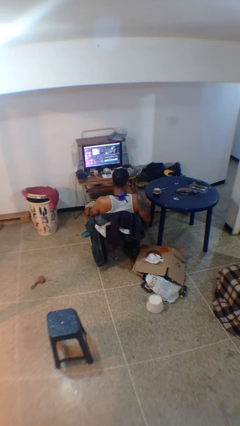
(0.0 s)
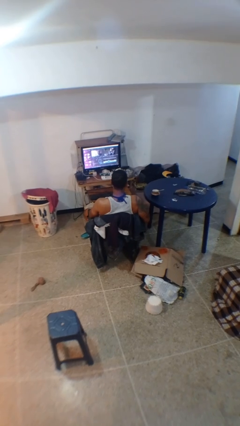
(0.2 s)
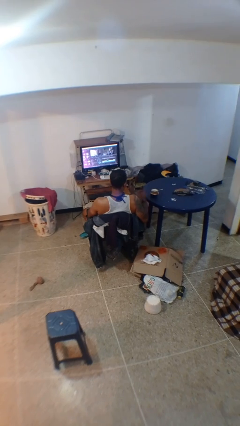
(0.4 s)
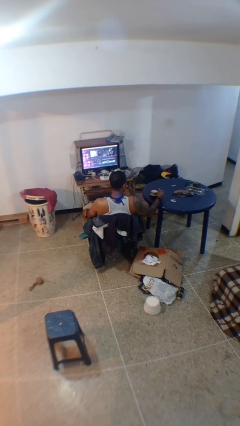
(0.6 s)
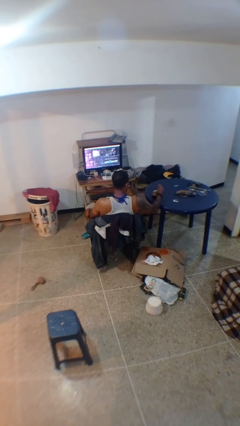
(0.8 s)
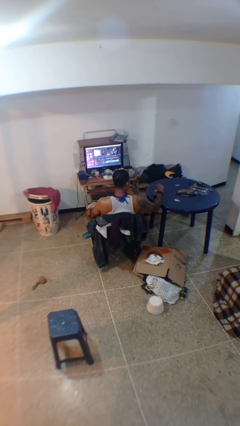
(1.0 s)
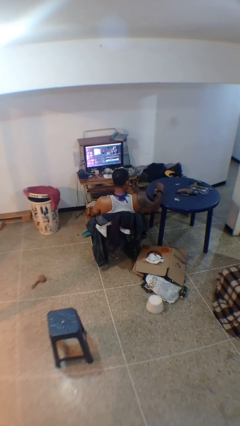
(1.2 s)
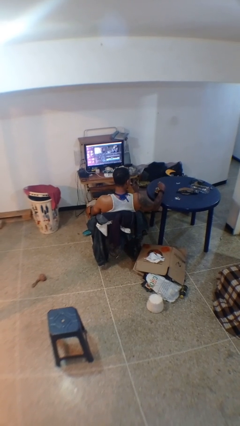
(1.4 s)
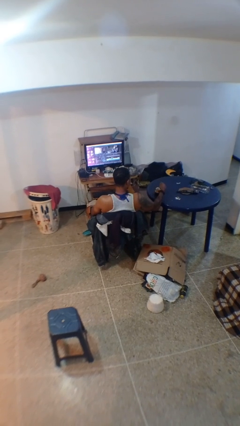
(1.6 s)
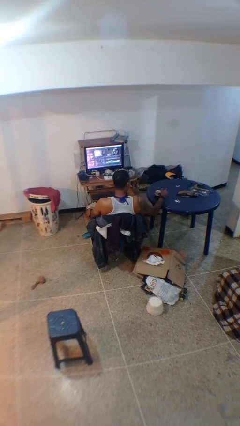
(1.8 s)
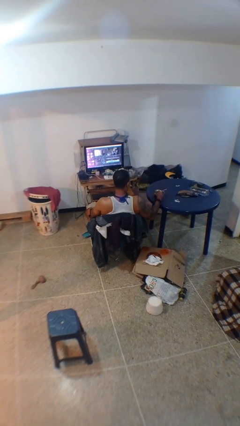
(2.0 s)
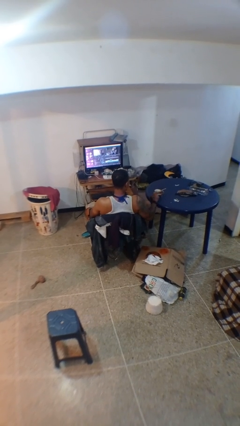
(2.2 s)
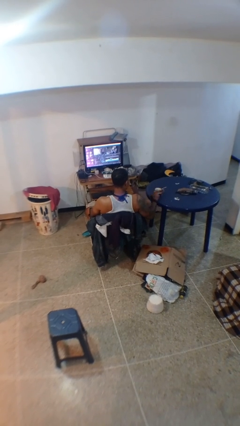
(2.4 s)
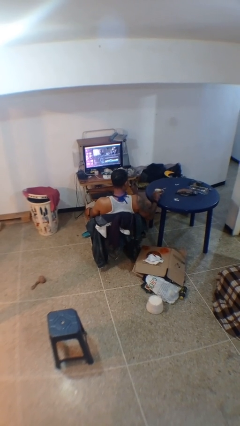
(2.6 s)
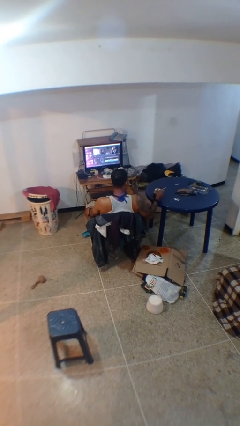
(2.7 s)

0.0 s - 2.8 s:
person stirs mug

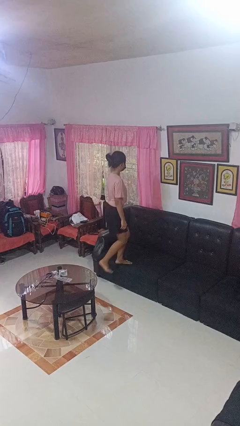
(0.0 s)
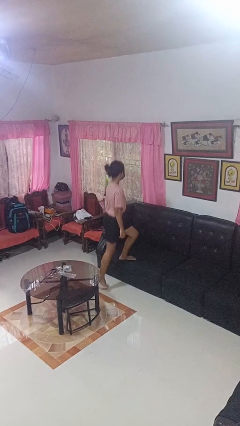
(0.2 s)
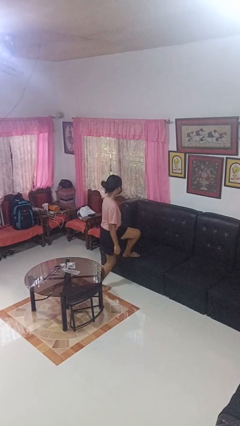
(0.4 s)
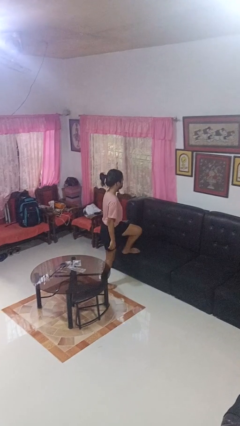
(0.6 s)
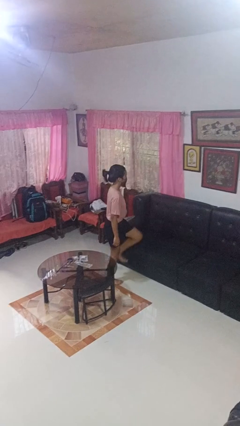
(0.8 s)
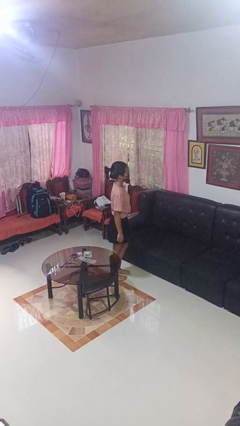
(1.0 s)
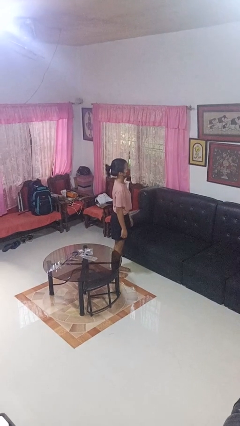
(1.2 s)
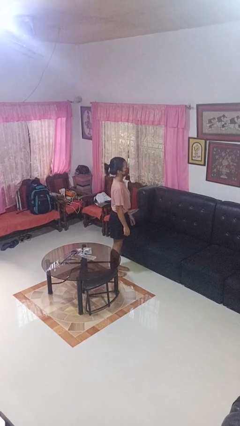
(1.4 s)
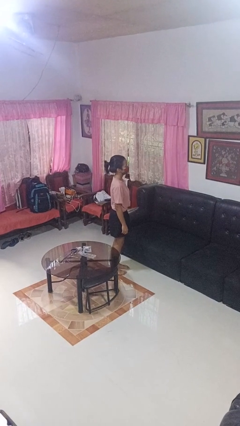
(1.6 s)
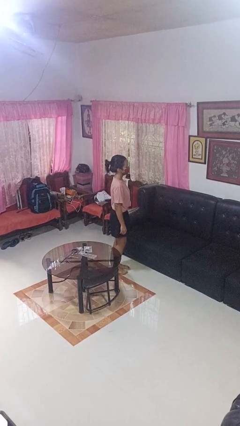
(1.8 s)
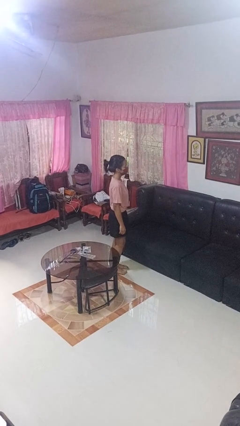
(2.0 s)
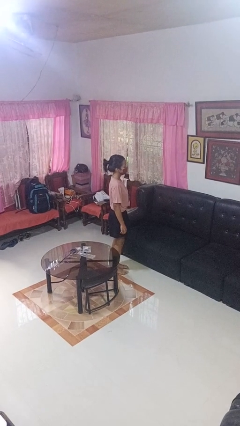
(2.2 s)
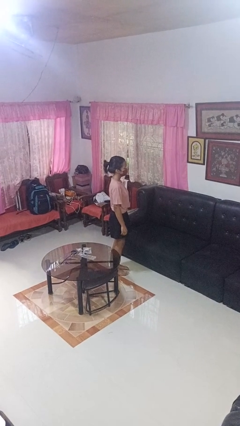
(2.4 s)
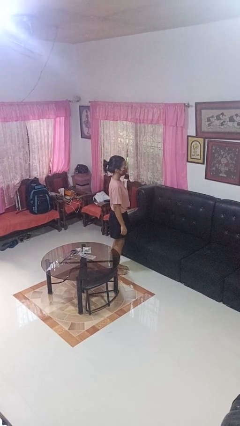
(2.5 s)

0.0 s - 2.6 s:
person climbs off couch

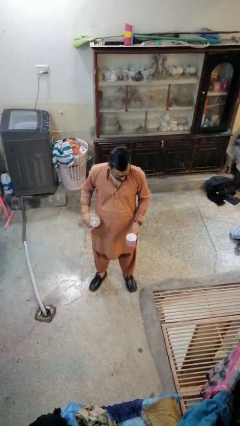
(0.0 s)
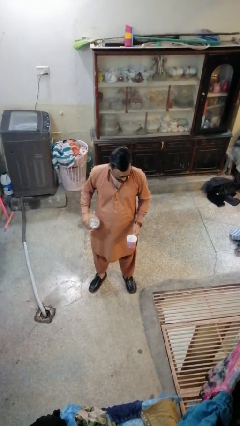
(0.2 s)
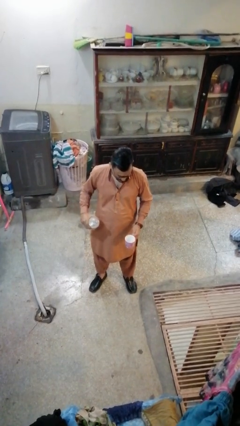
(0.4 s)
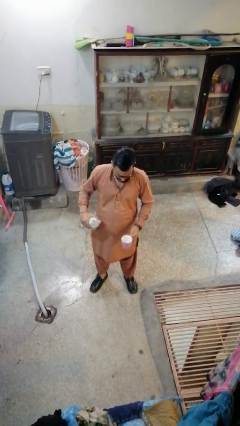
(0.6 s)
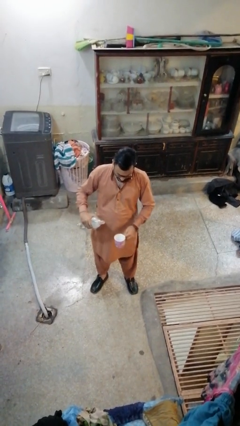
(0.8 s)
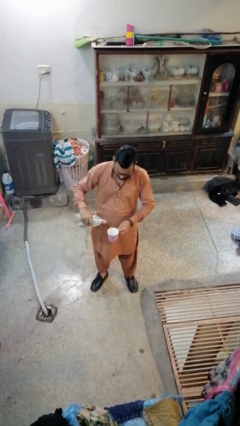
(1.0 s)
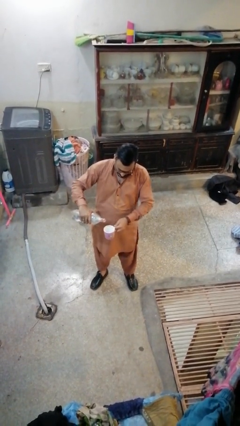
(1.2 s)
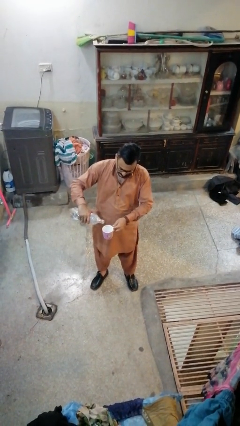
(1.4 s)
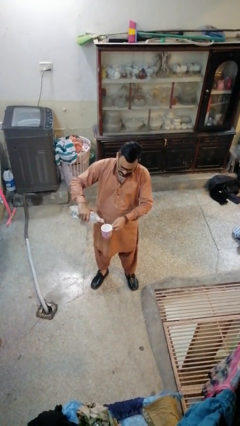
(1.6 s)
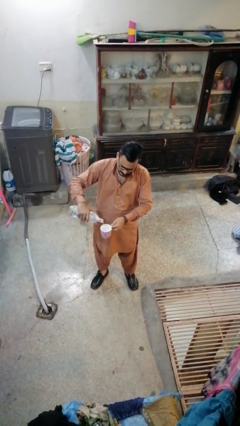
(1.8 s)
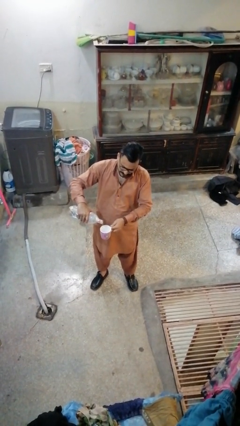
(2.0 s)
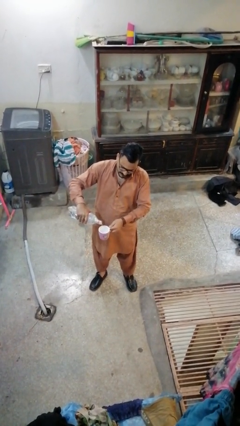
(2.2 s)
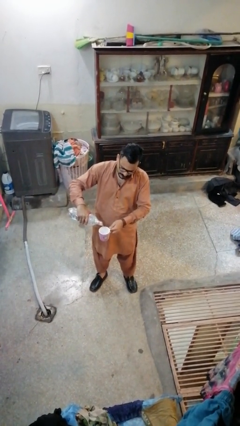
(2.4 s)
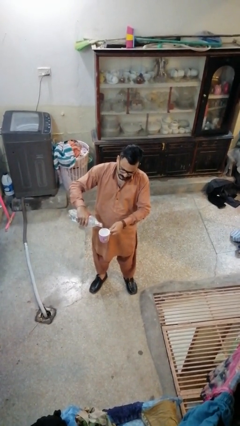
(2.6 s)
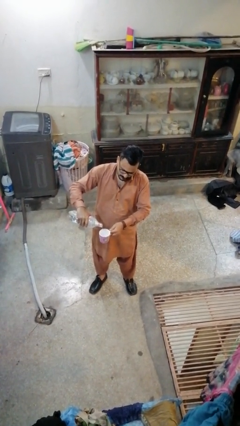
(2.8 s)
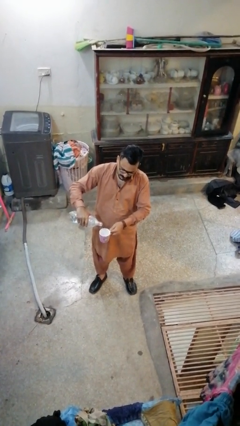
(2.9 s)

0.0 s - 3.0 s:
person pours liquid into cup

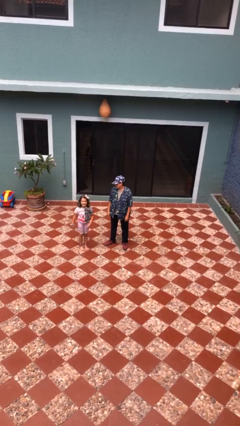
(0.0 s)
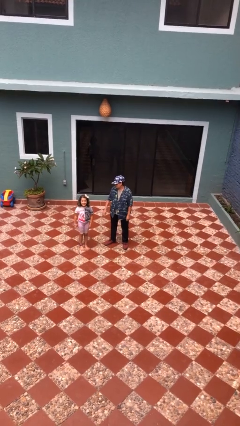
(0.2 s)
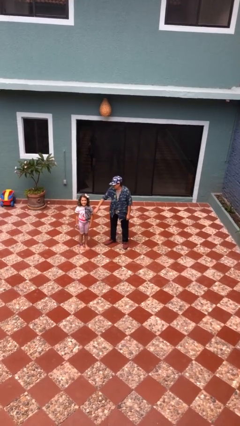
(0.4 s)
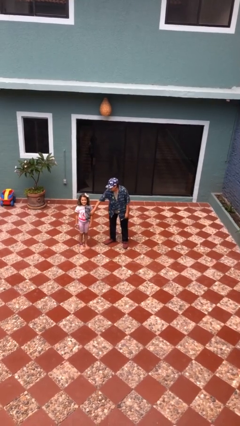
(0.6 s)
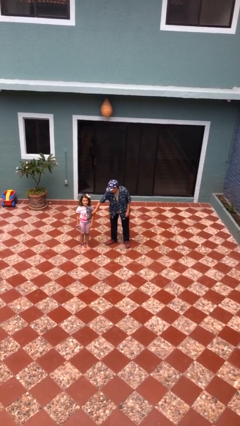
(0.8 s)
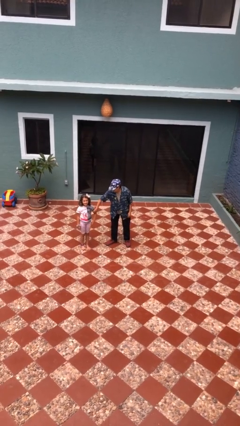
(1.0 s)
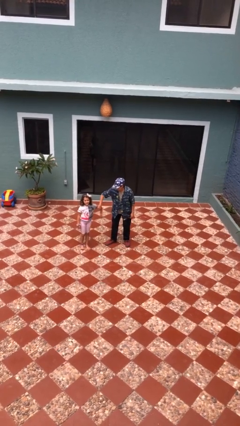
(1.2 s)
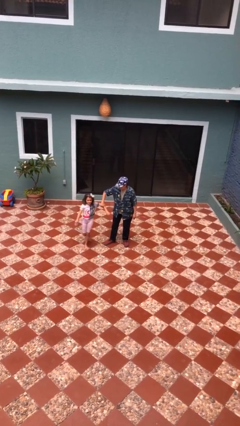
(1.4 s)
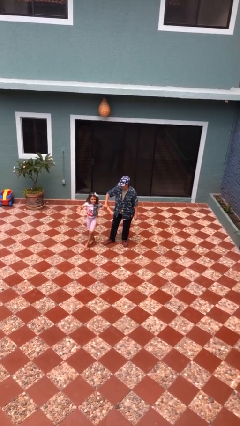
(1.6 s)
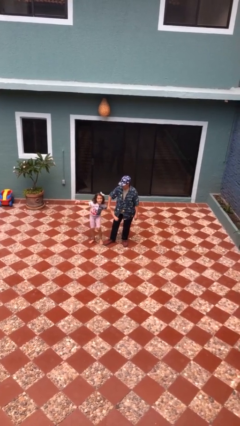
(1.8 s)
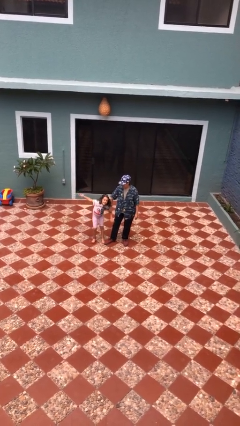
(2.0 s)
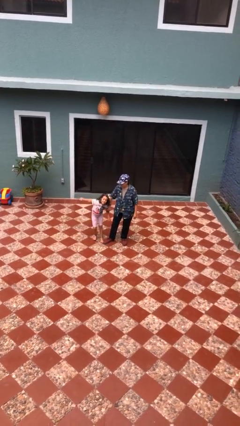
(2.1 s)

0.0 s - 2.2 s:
person grabs person by bicep

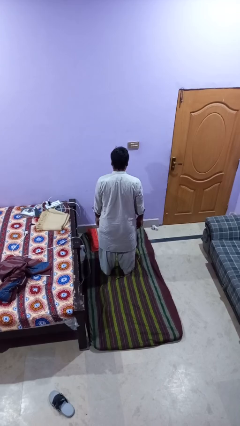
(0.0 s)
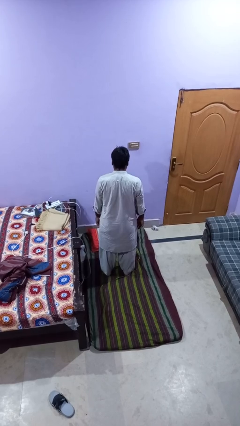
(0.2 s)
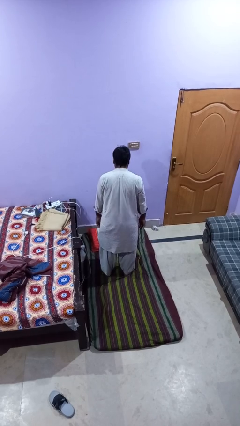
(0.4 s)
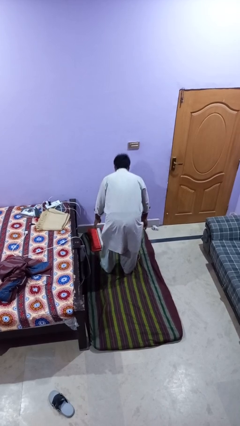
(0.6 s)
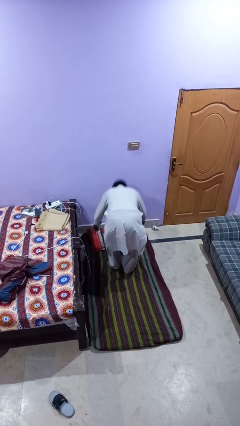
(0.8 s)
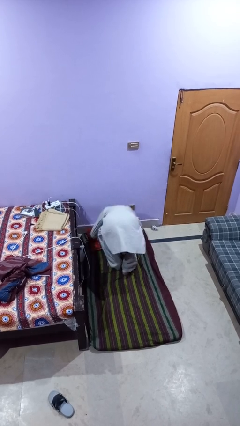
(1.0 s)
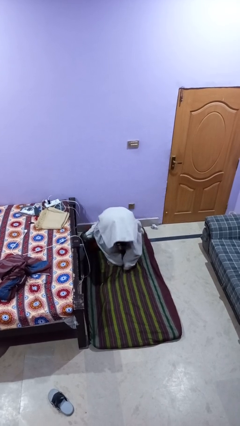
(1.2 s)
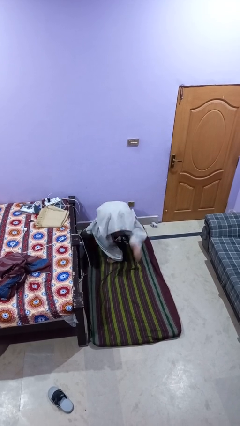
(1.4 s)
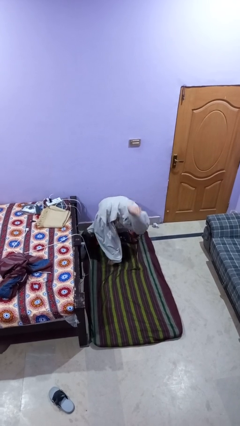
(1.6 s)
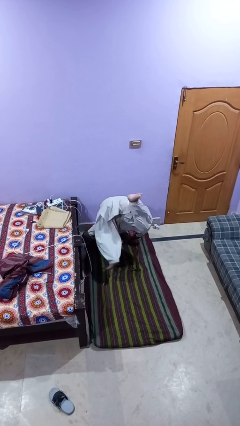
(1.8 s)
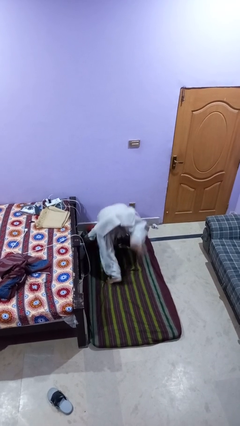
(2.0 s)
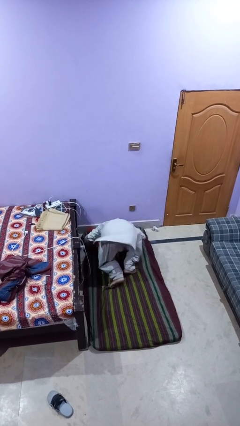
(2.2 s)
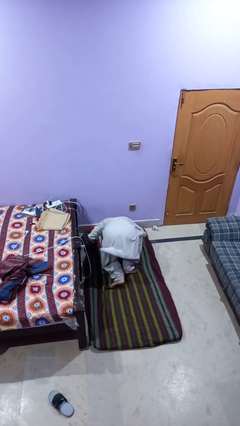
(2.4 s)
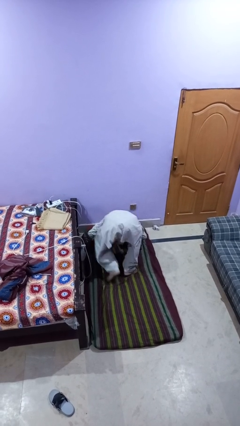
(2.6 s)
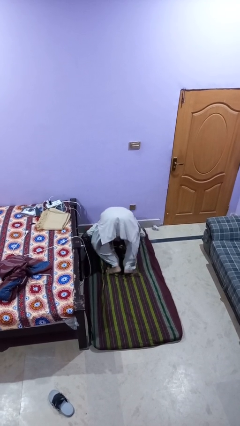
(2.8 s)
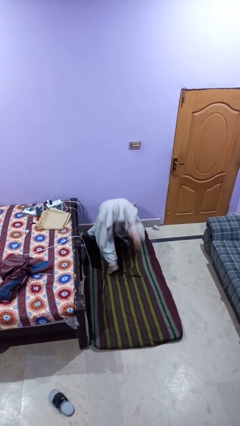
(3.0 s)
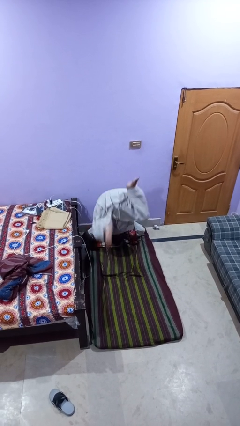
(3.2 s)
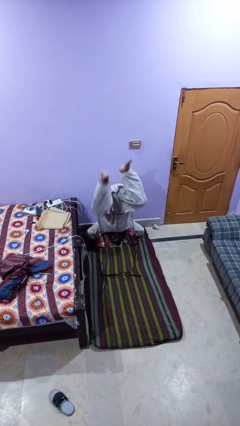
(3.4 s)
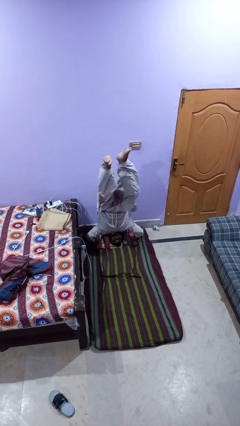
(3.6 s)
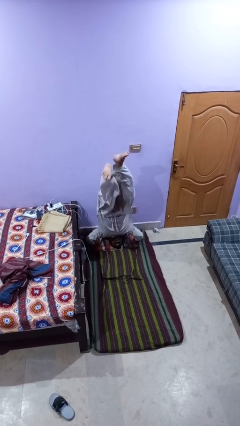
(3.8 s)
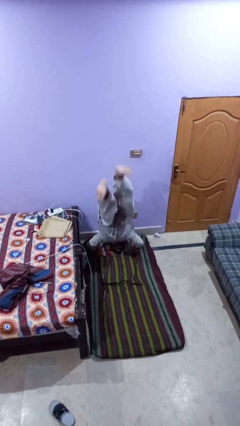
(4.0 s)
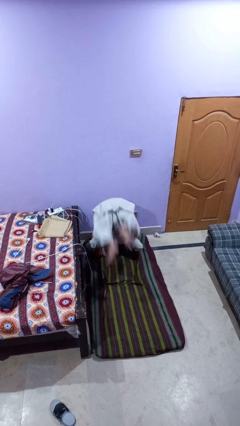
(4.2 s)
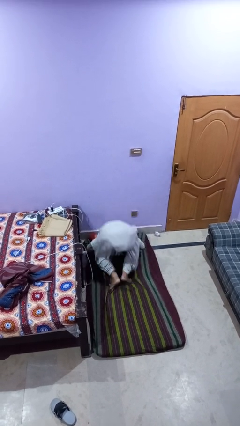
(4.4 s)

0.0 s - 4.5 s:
person handstand

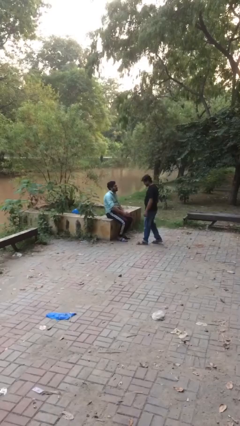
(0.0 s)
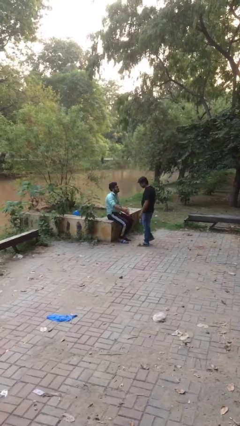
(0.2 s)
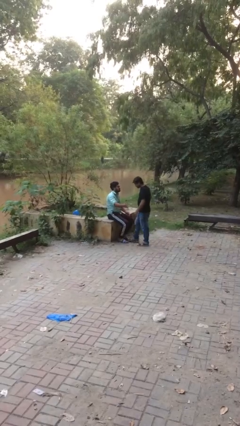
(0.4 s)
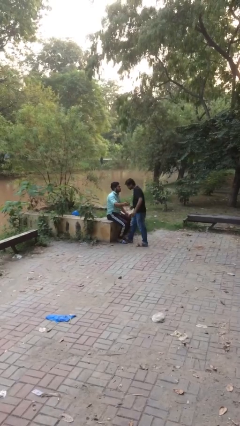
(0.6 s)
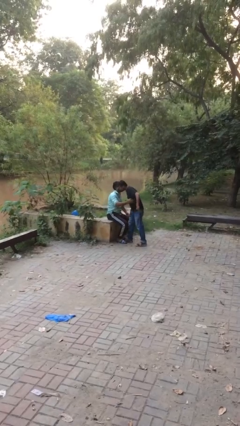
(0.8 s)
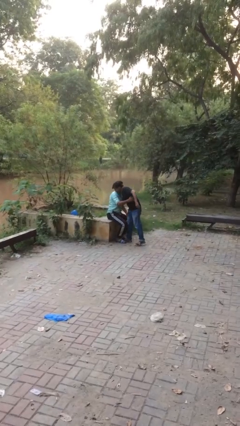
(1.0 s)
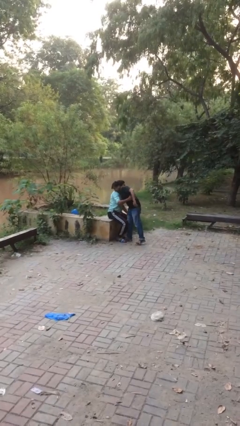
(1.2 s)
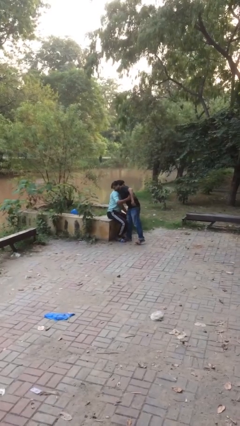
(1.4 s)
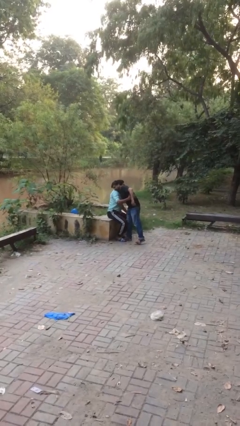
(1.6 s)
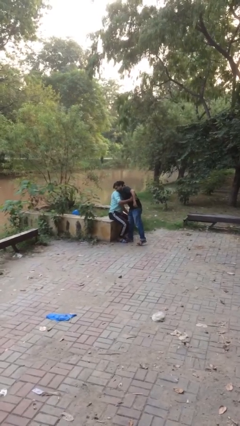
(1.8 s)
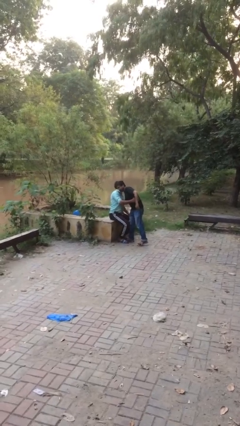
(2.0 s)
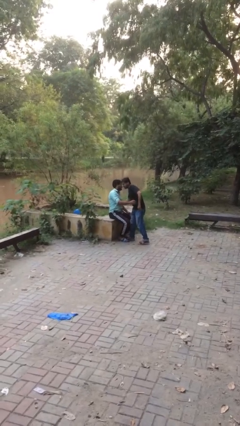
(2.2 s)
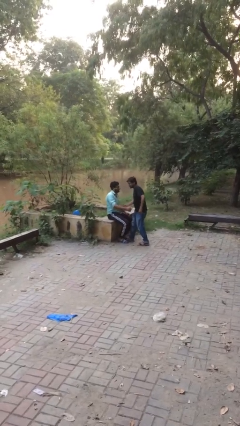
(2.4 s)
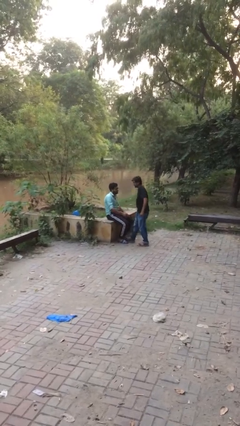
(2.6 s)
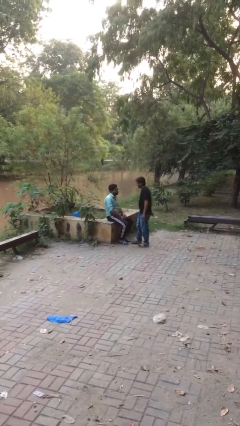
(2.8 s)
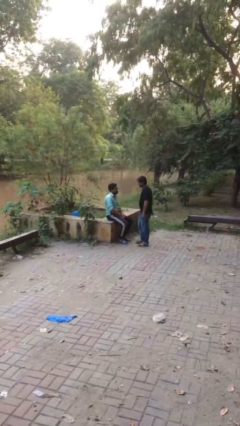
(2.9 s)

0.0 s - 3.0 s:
person embraces person
